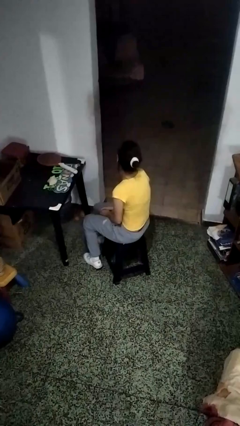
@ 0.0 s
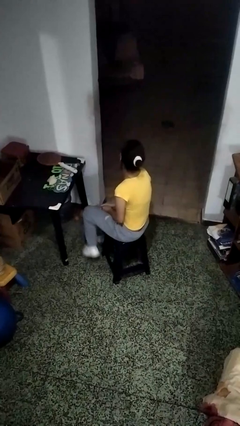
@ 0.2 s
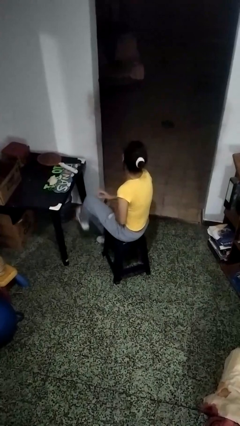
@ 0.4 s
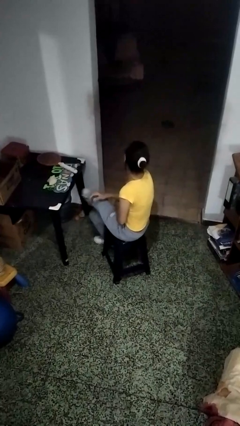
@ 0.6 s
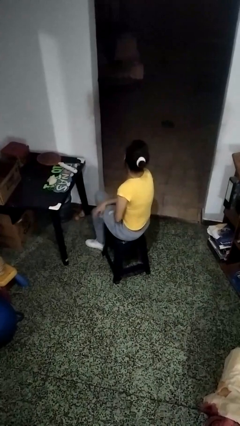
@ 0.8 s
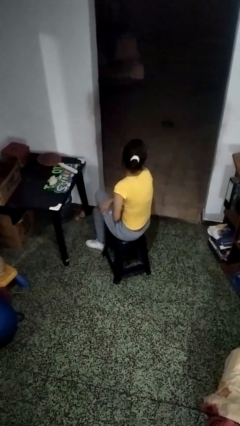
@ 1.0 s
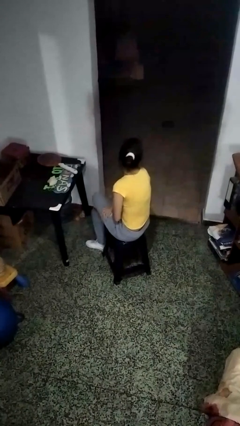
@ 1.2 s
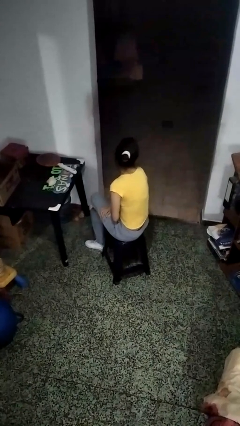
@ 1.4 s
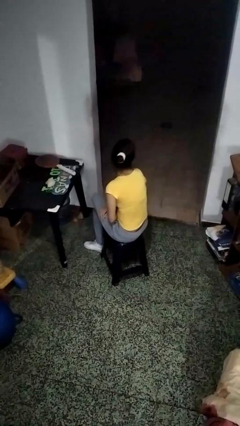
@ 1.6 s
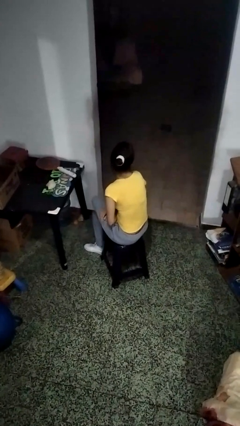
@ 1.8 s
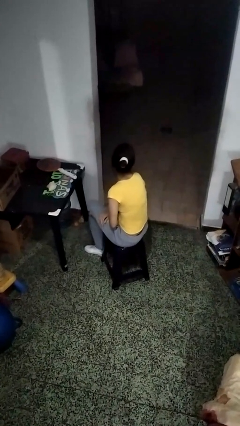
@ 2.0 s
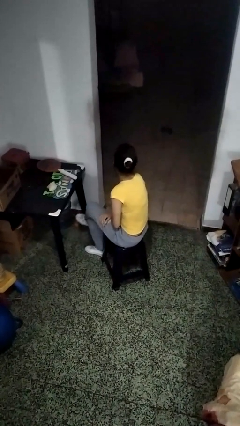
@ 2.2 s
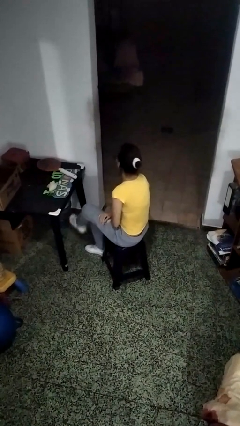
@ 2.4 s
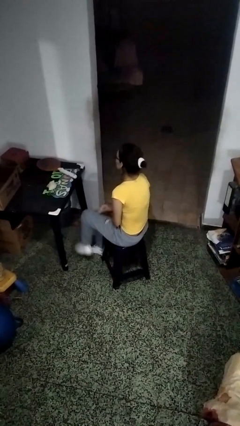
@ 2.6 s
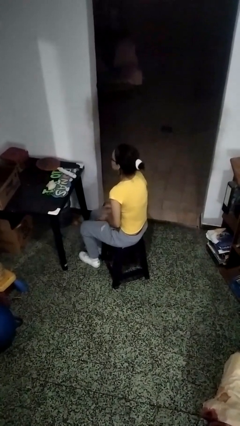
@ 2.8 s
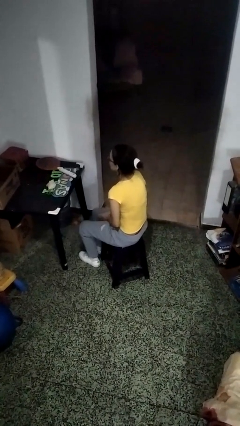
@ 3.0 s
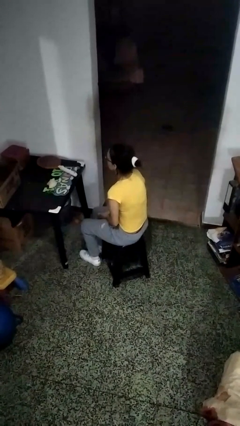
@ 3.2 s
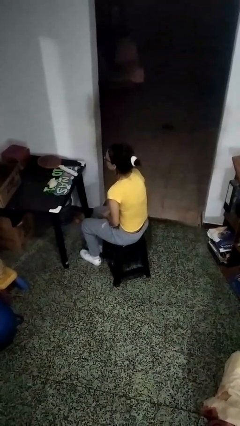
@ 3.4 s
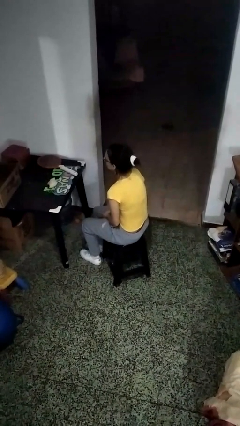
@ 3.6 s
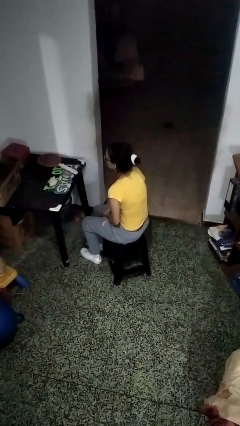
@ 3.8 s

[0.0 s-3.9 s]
person crosses legs

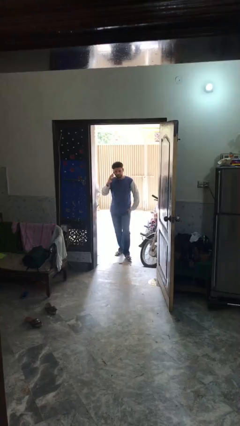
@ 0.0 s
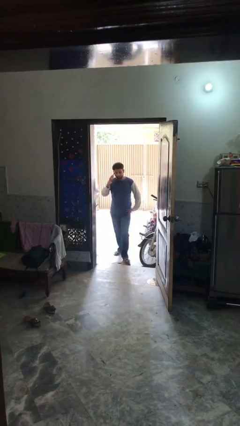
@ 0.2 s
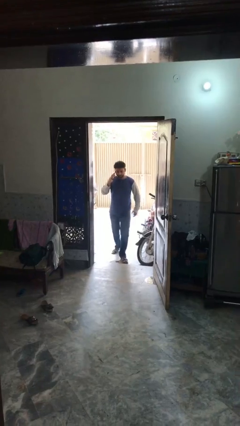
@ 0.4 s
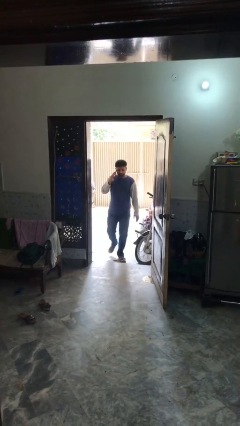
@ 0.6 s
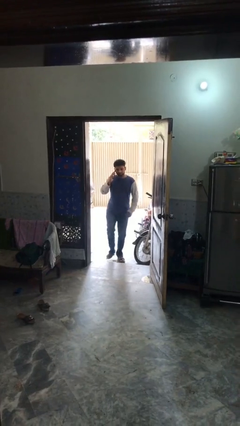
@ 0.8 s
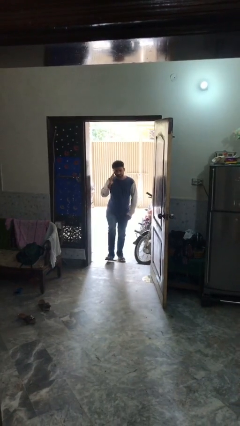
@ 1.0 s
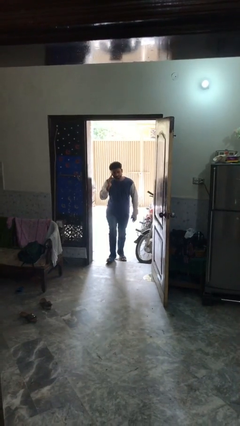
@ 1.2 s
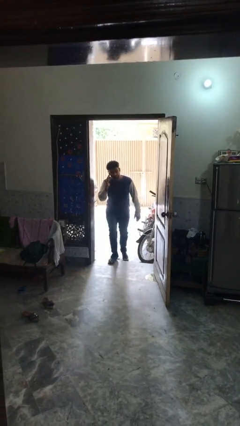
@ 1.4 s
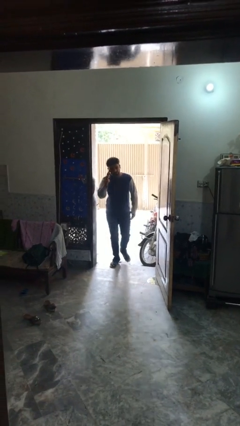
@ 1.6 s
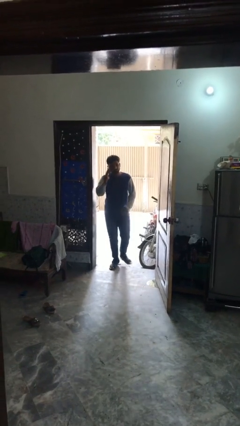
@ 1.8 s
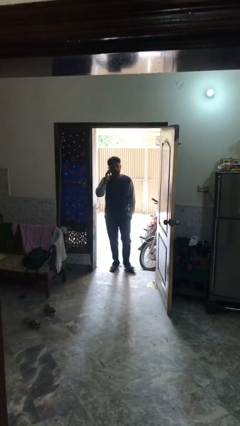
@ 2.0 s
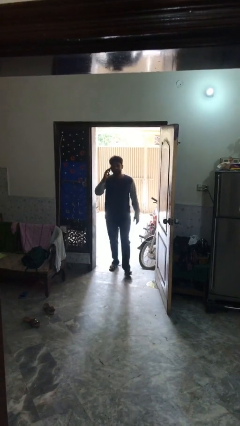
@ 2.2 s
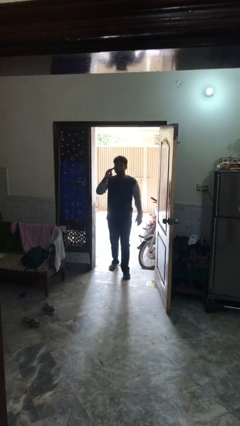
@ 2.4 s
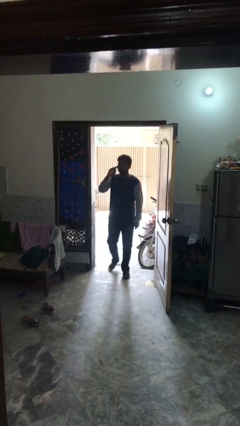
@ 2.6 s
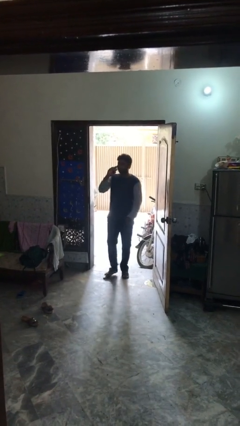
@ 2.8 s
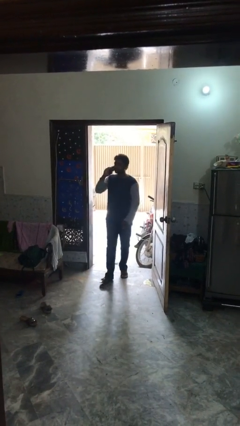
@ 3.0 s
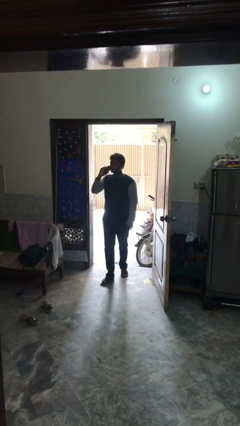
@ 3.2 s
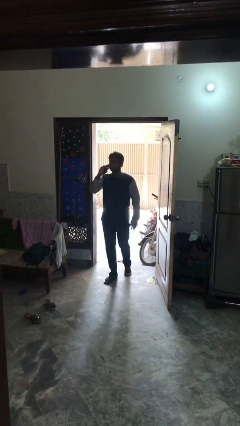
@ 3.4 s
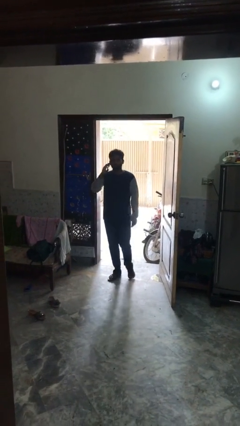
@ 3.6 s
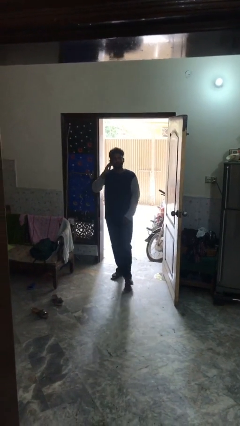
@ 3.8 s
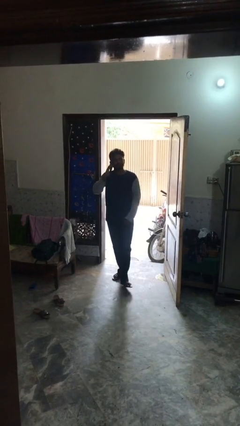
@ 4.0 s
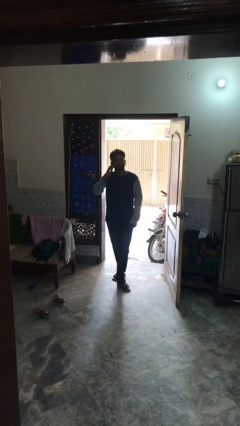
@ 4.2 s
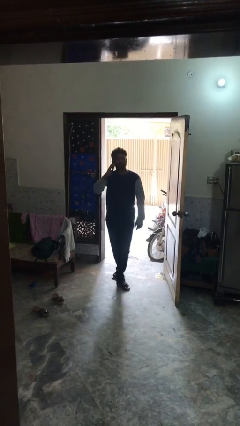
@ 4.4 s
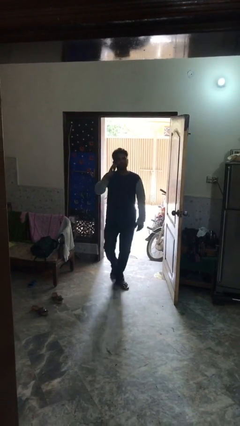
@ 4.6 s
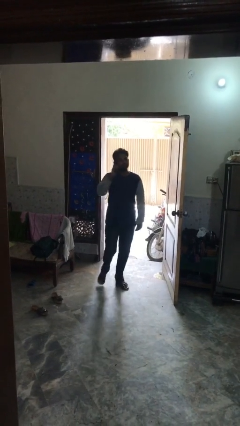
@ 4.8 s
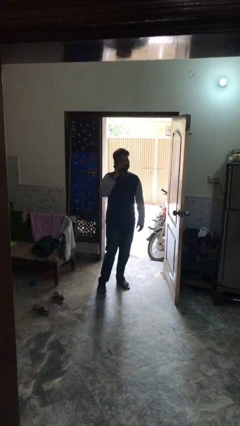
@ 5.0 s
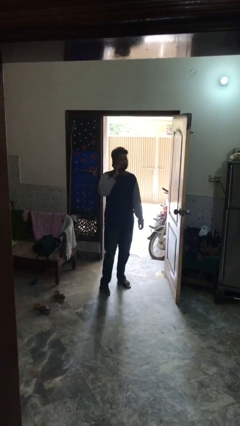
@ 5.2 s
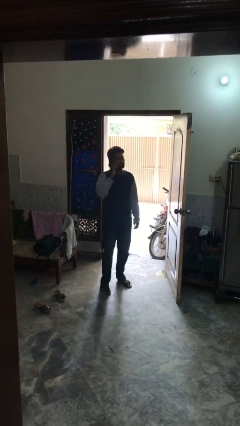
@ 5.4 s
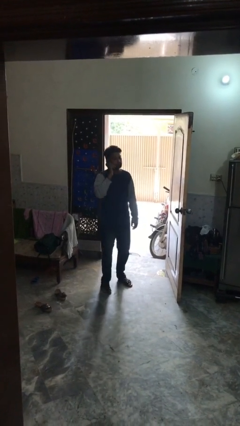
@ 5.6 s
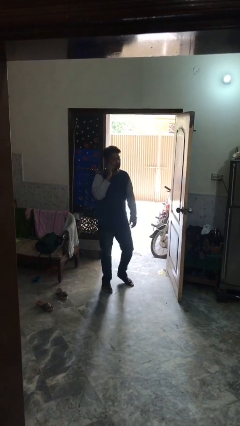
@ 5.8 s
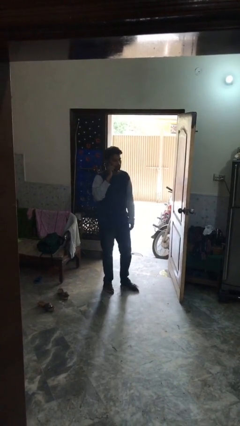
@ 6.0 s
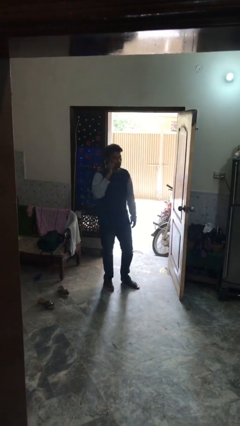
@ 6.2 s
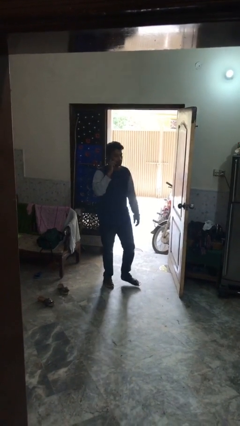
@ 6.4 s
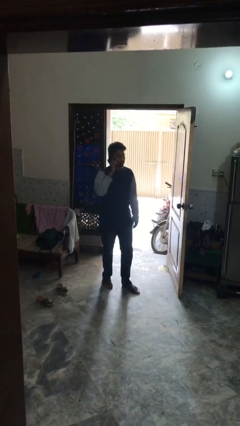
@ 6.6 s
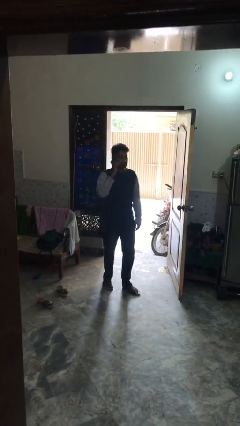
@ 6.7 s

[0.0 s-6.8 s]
person enters scene through structure

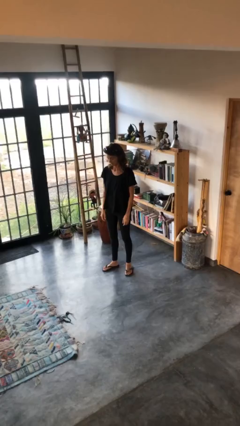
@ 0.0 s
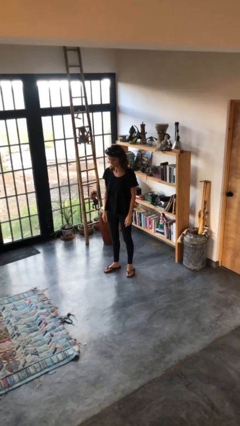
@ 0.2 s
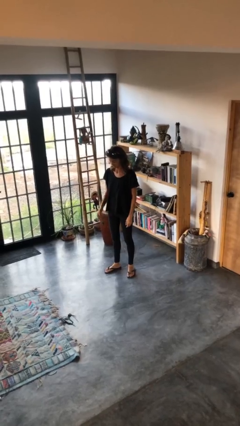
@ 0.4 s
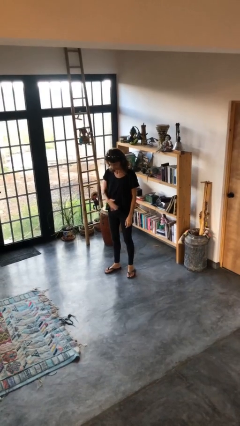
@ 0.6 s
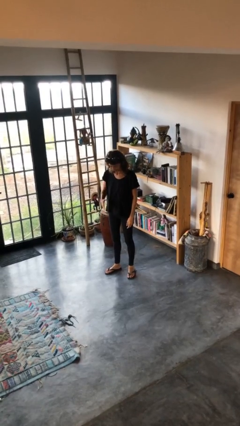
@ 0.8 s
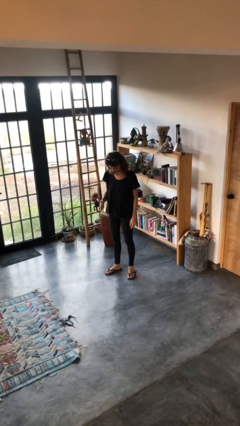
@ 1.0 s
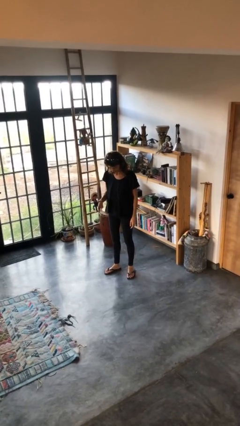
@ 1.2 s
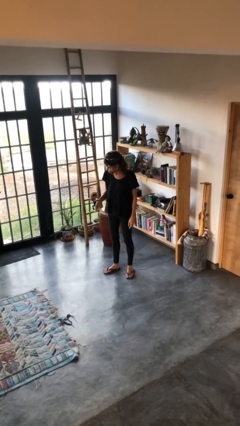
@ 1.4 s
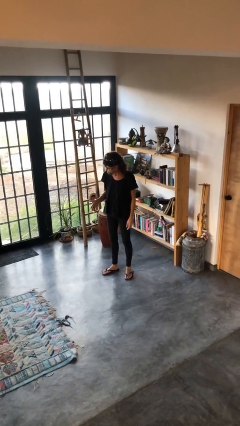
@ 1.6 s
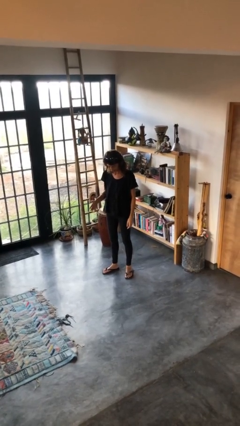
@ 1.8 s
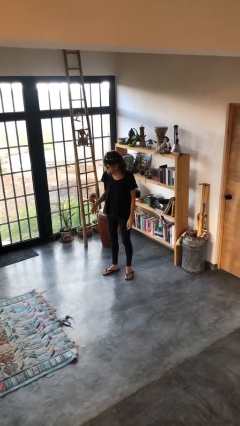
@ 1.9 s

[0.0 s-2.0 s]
person swats bug

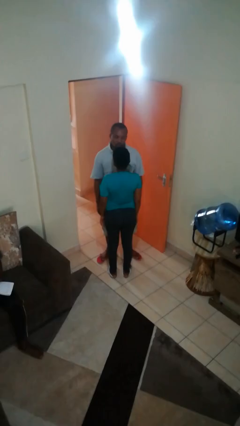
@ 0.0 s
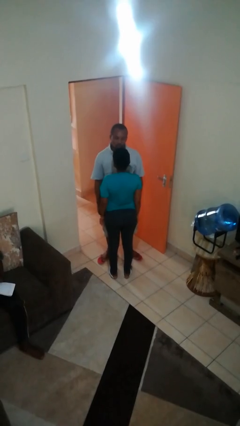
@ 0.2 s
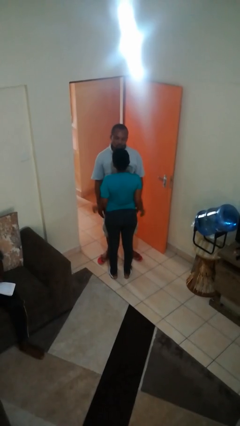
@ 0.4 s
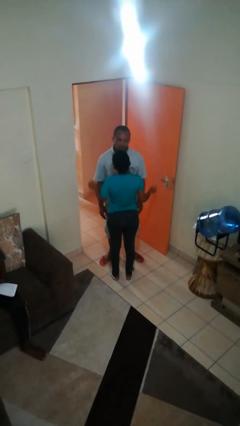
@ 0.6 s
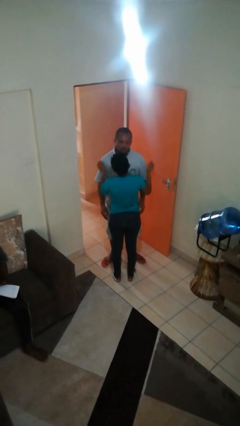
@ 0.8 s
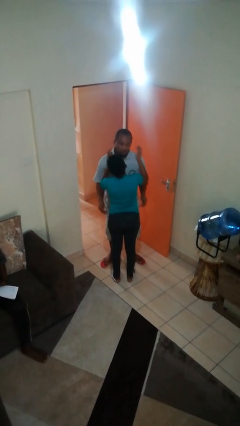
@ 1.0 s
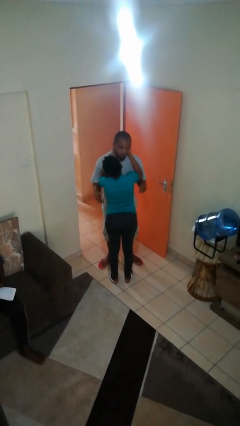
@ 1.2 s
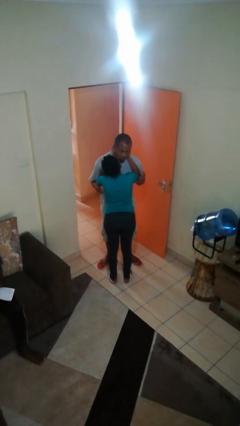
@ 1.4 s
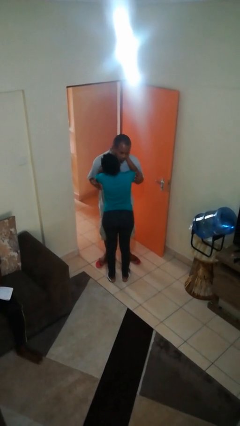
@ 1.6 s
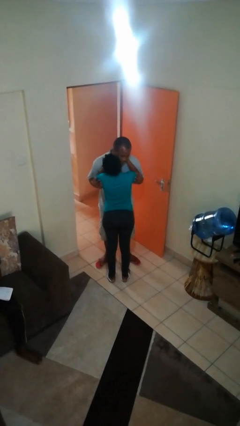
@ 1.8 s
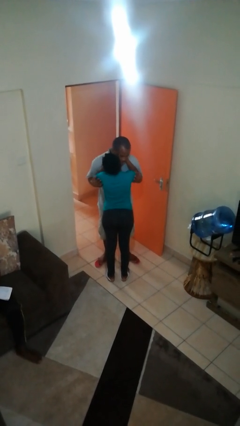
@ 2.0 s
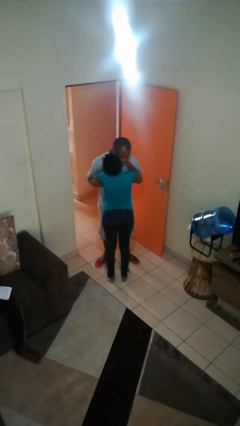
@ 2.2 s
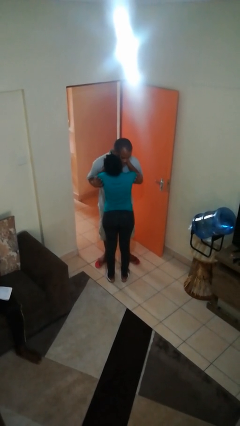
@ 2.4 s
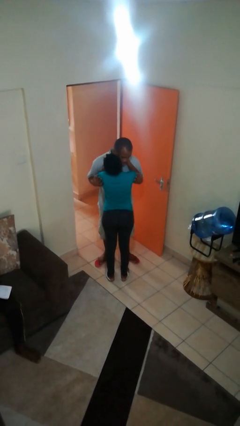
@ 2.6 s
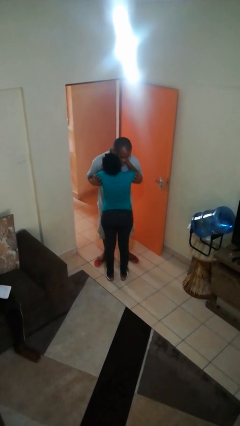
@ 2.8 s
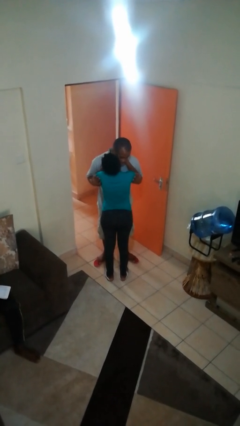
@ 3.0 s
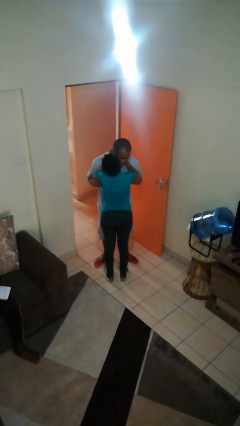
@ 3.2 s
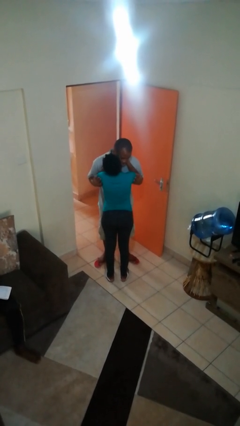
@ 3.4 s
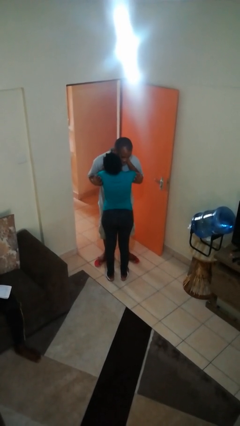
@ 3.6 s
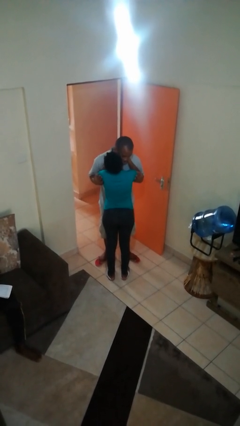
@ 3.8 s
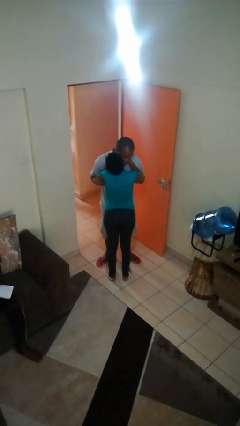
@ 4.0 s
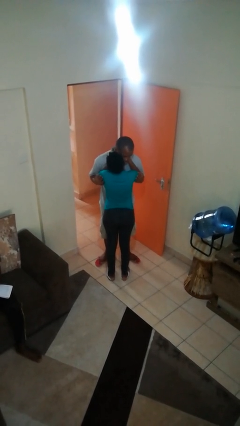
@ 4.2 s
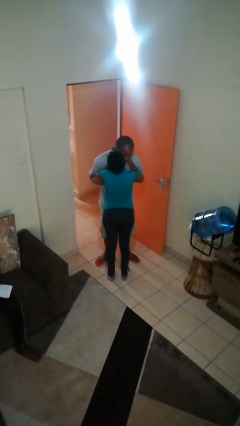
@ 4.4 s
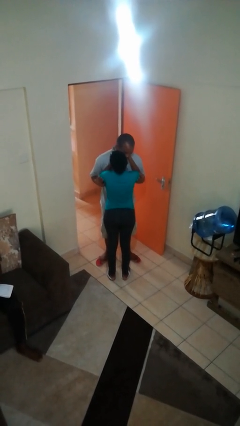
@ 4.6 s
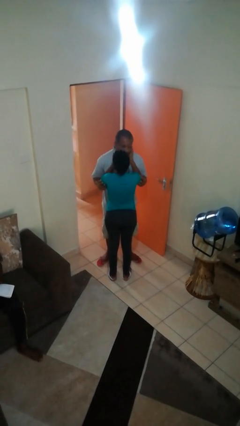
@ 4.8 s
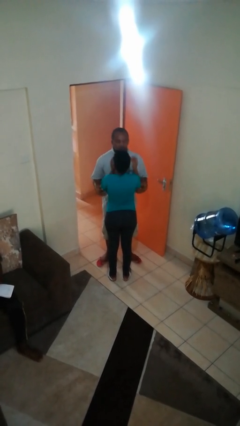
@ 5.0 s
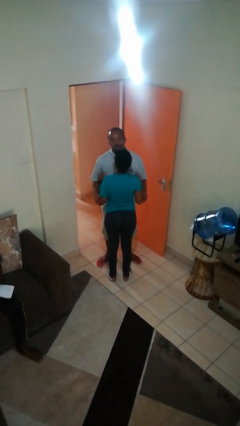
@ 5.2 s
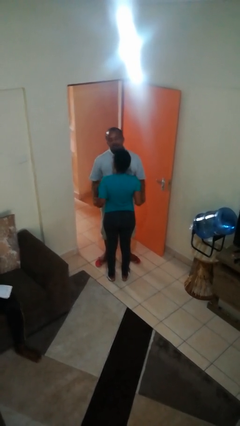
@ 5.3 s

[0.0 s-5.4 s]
person kisses cheek of person
